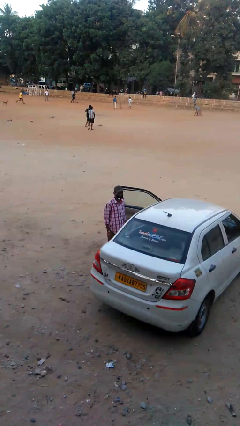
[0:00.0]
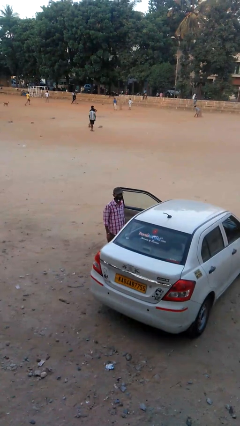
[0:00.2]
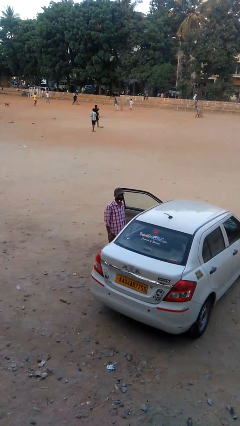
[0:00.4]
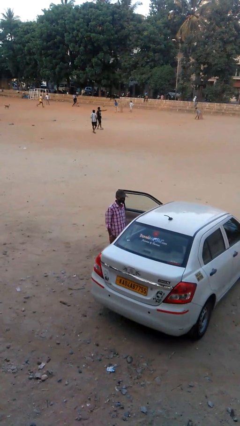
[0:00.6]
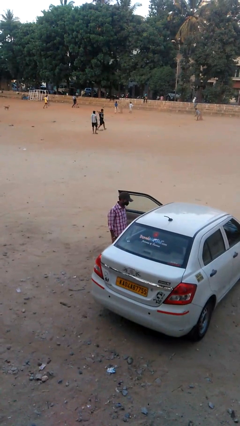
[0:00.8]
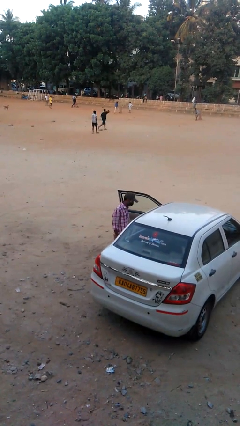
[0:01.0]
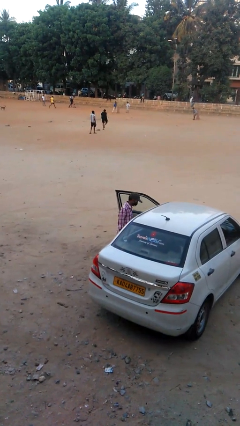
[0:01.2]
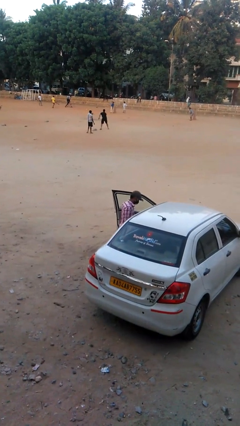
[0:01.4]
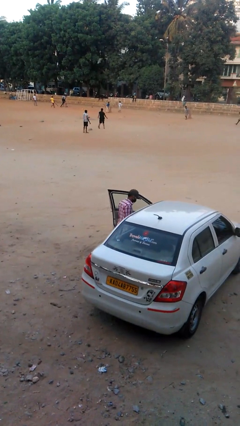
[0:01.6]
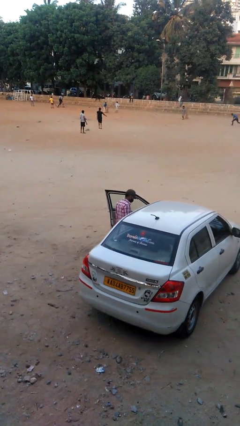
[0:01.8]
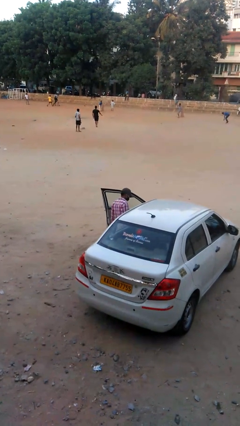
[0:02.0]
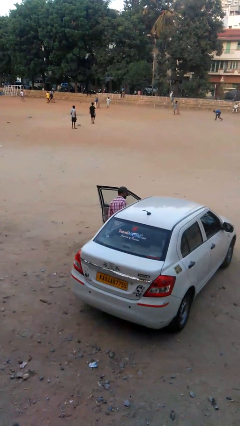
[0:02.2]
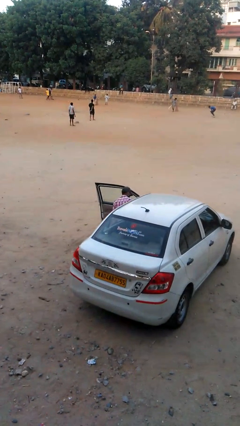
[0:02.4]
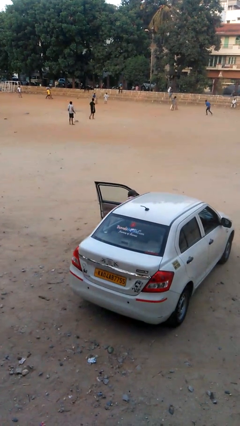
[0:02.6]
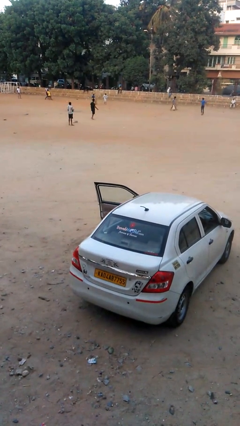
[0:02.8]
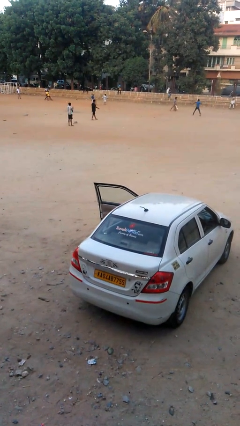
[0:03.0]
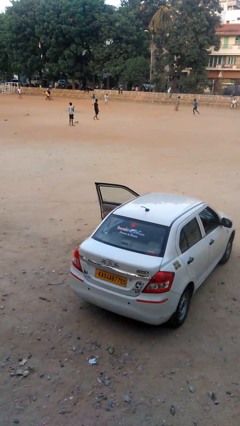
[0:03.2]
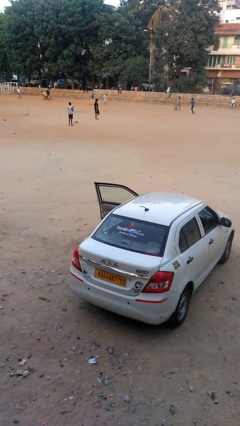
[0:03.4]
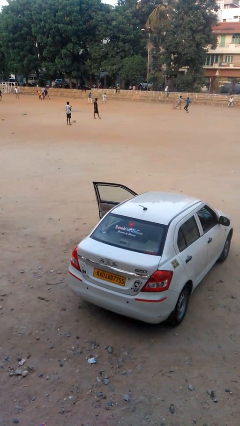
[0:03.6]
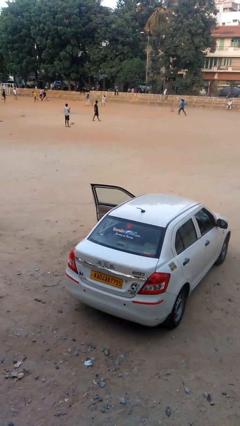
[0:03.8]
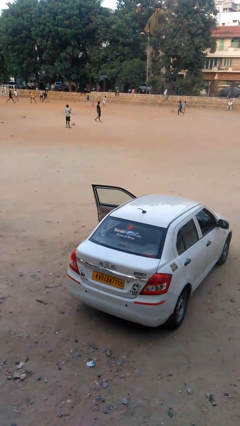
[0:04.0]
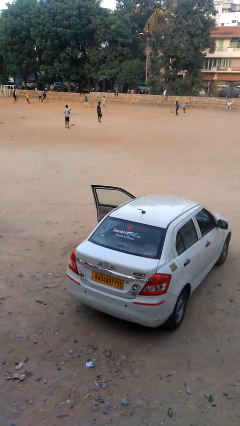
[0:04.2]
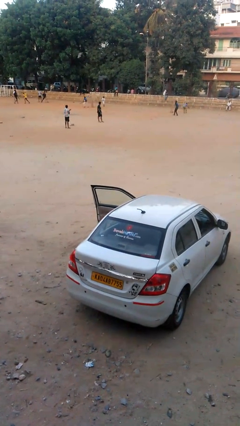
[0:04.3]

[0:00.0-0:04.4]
person enters car

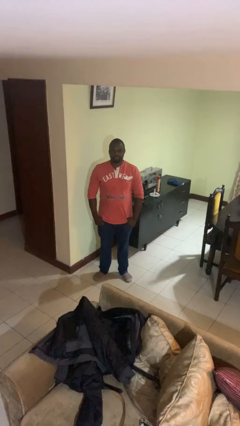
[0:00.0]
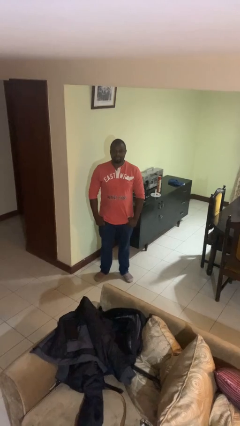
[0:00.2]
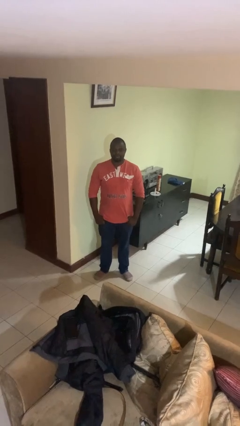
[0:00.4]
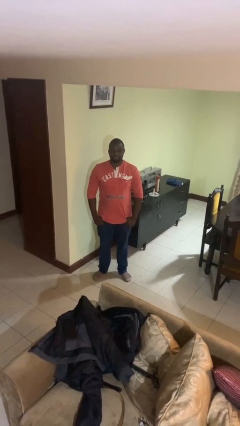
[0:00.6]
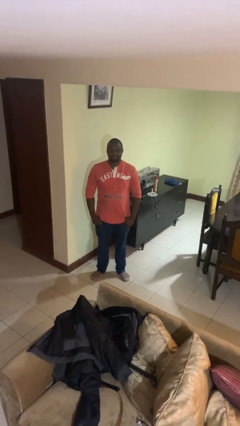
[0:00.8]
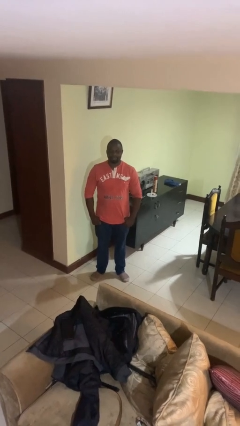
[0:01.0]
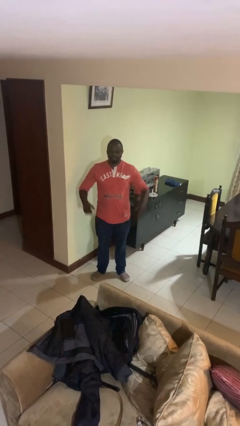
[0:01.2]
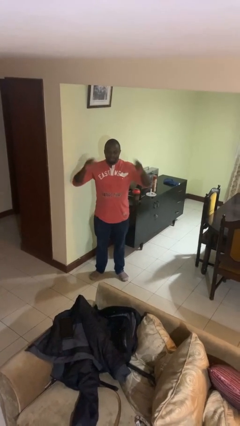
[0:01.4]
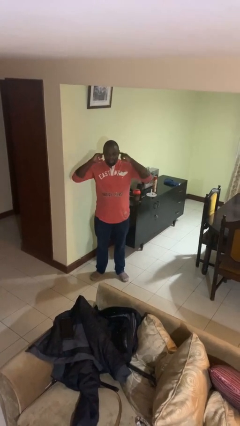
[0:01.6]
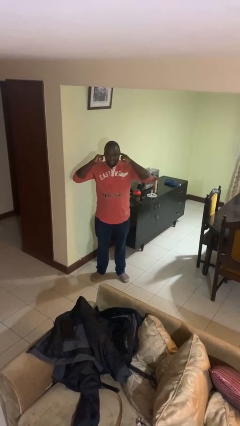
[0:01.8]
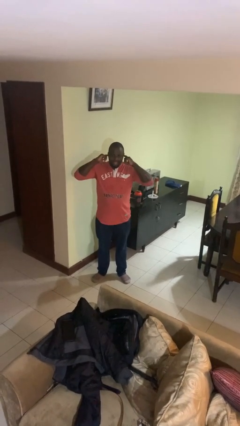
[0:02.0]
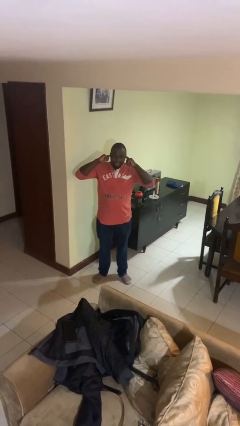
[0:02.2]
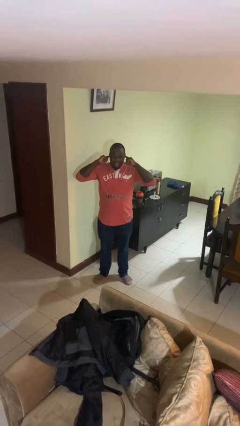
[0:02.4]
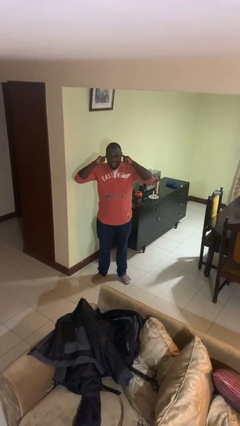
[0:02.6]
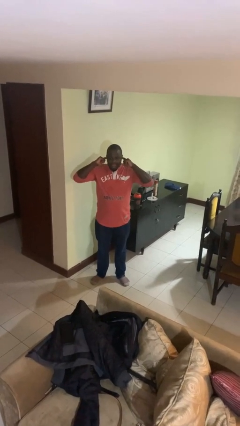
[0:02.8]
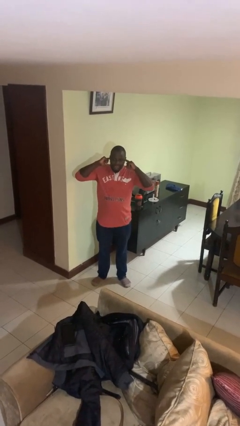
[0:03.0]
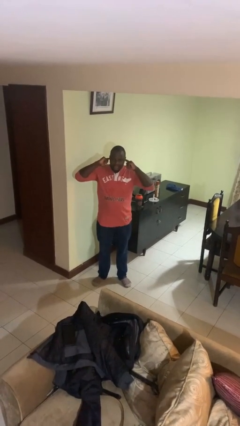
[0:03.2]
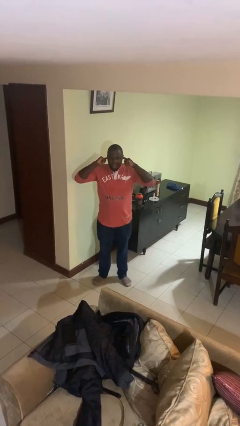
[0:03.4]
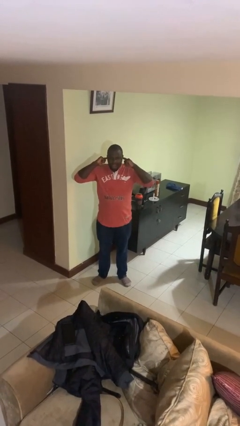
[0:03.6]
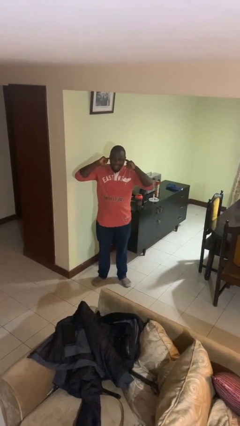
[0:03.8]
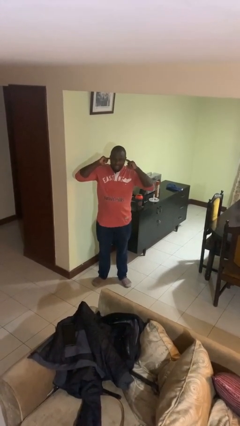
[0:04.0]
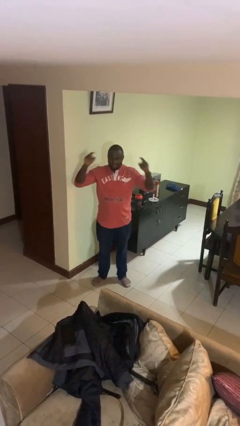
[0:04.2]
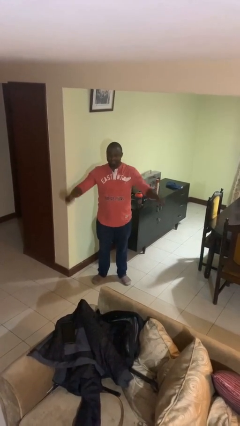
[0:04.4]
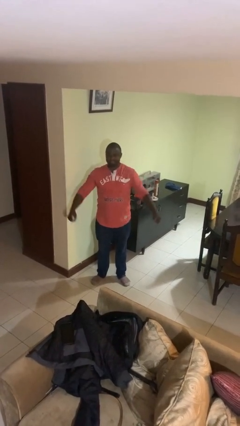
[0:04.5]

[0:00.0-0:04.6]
person puts fingers in ear

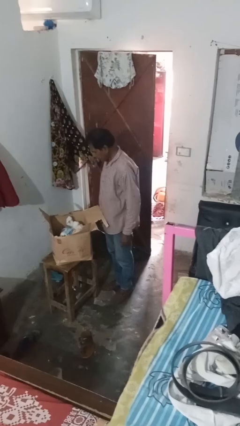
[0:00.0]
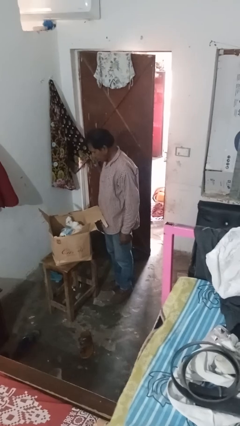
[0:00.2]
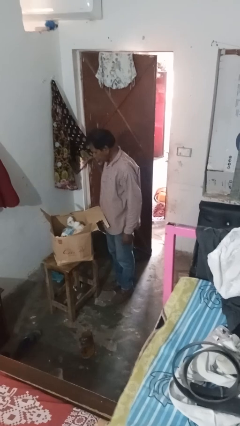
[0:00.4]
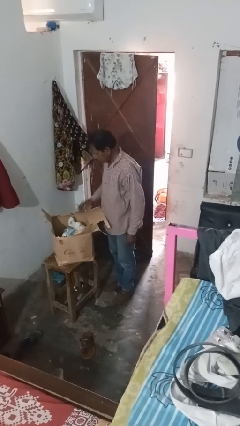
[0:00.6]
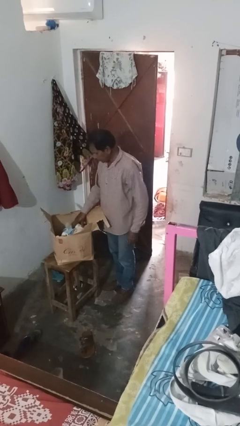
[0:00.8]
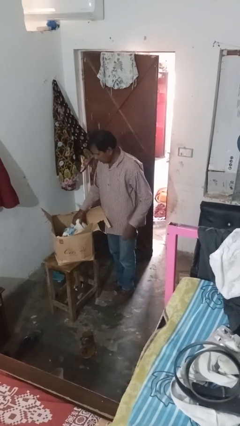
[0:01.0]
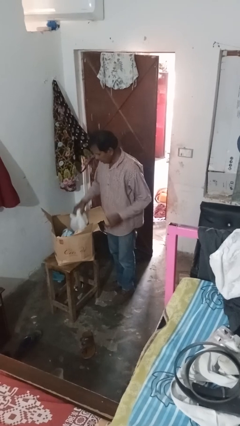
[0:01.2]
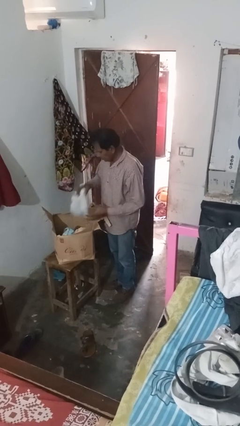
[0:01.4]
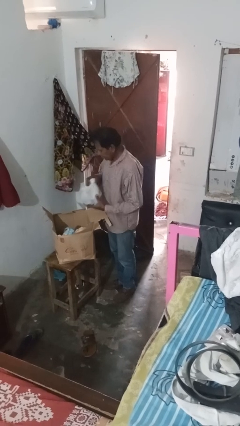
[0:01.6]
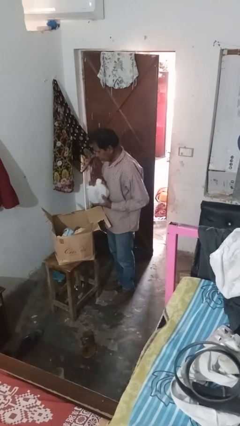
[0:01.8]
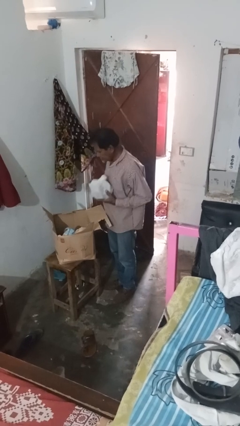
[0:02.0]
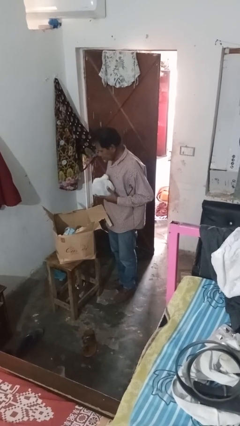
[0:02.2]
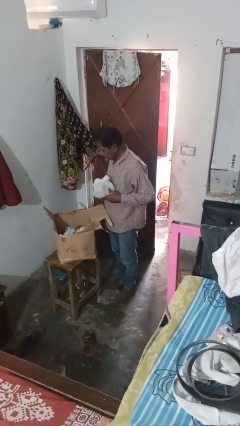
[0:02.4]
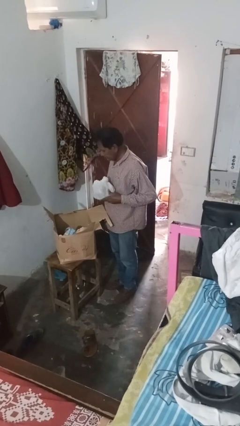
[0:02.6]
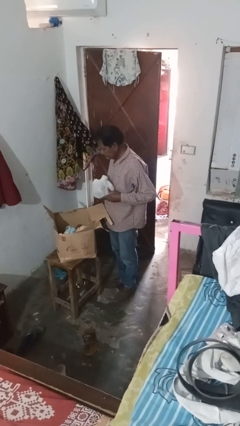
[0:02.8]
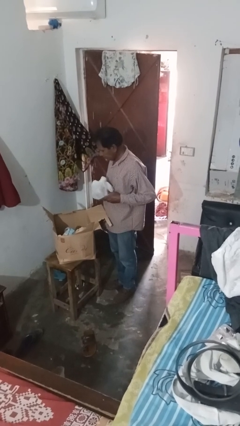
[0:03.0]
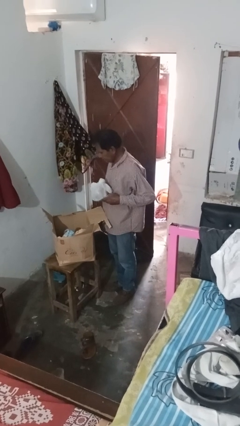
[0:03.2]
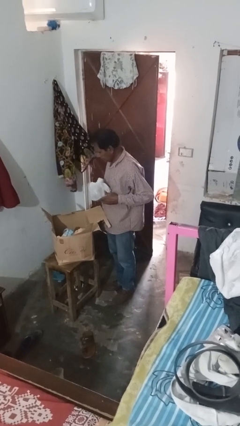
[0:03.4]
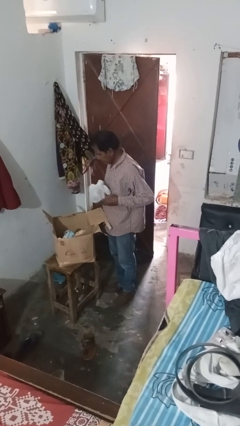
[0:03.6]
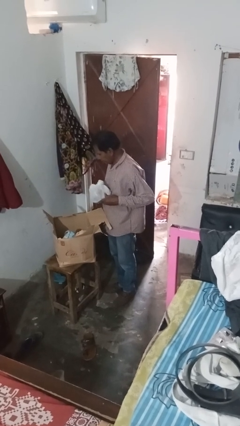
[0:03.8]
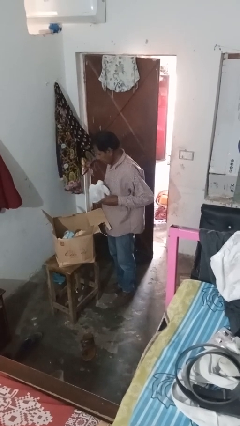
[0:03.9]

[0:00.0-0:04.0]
person takes object from box

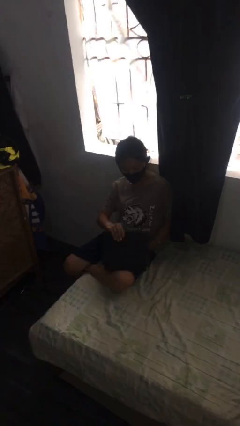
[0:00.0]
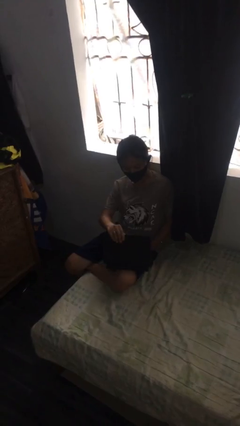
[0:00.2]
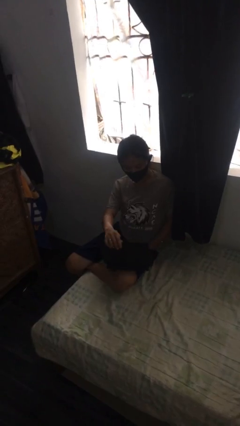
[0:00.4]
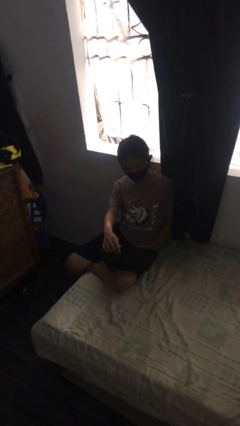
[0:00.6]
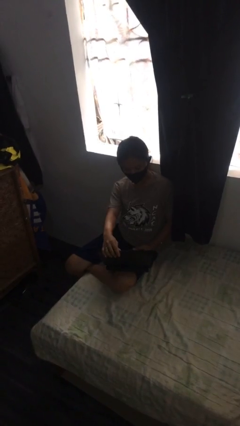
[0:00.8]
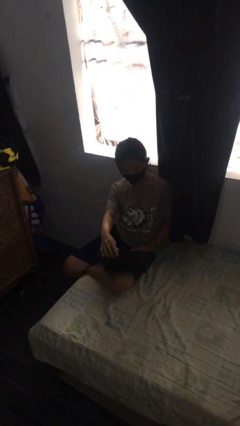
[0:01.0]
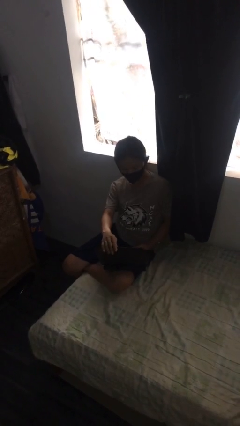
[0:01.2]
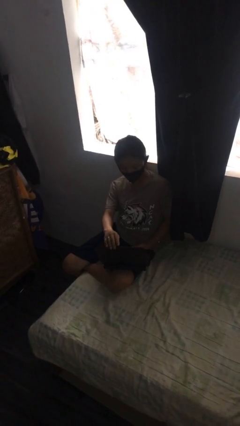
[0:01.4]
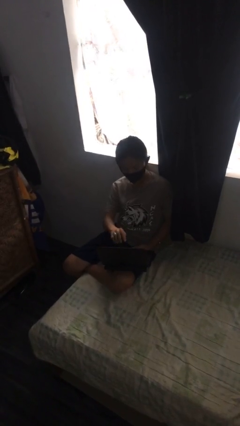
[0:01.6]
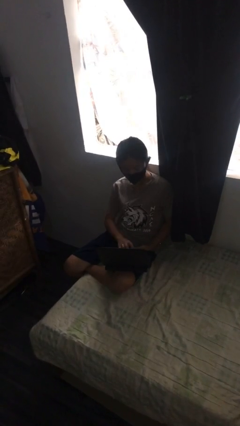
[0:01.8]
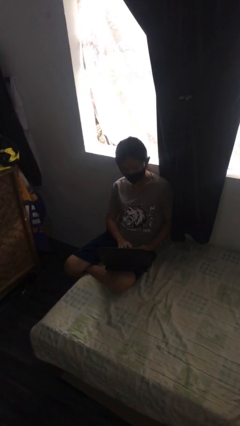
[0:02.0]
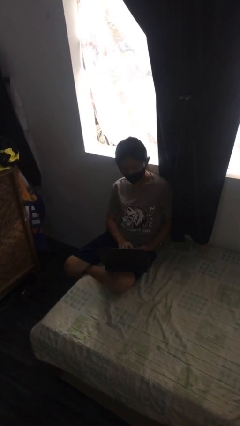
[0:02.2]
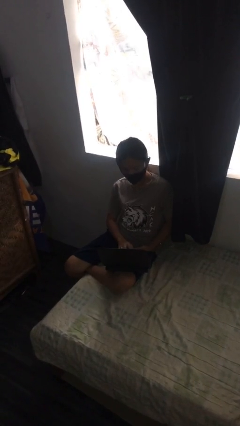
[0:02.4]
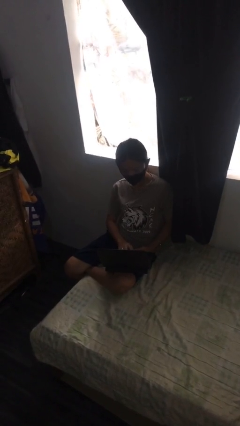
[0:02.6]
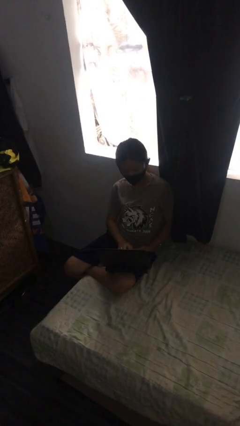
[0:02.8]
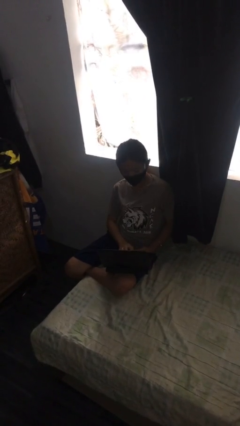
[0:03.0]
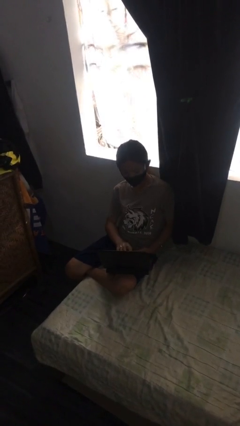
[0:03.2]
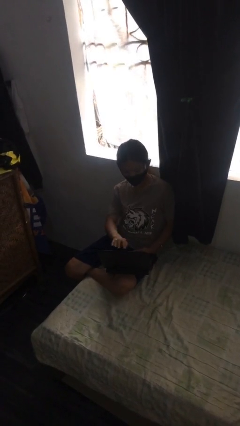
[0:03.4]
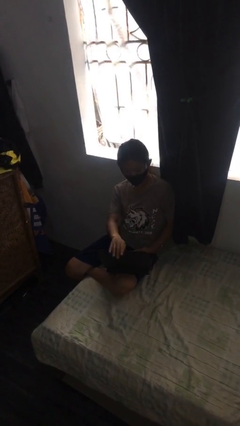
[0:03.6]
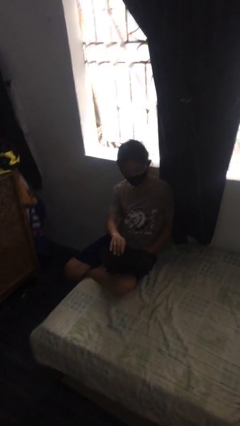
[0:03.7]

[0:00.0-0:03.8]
person interacts with laptop

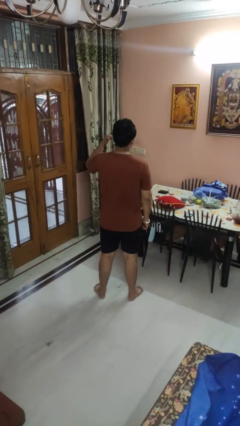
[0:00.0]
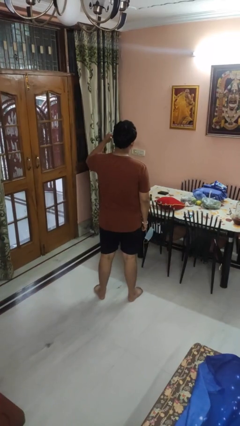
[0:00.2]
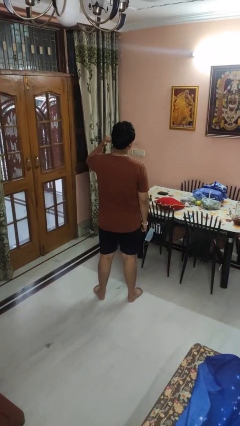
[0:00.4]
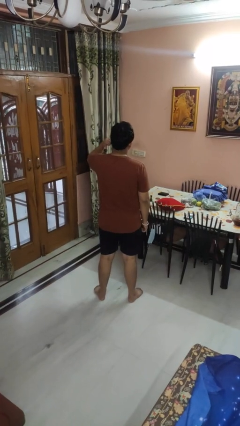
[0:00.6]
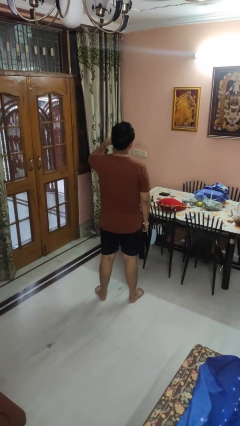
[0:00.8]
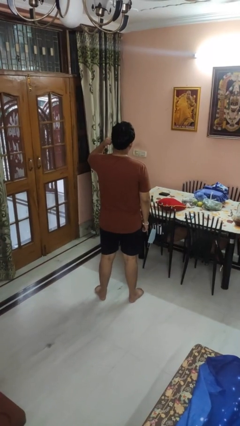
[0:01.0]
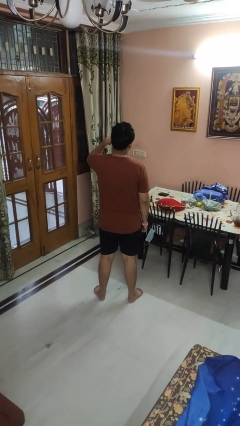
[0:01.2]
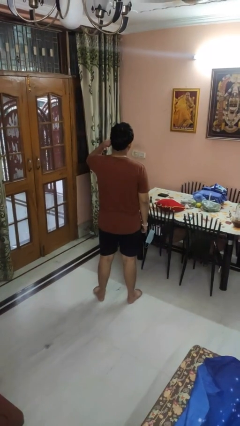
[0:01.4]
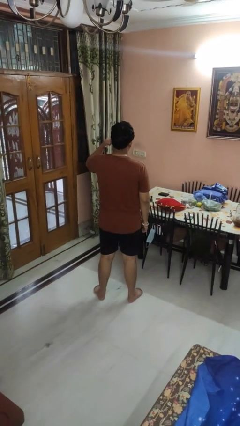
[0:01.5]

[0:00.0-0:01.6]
person gestures behind me
